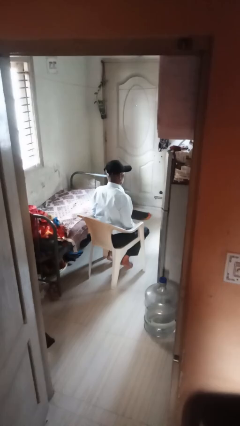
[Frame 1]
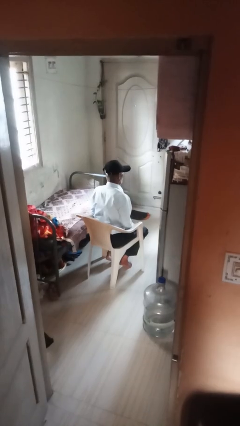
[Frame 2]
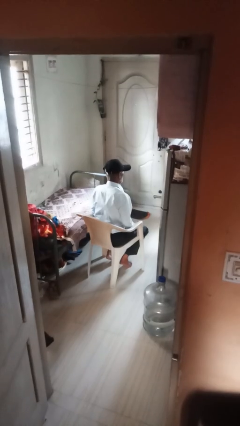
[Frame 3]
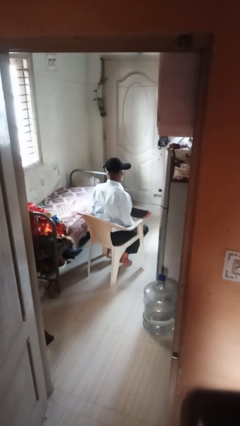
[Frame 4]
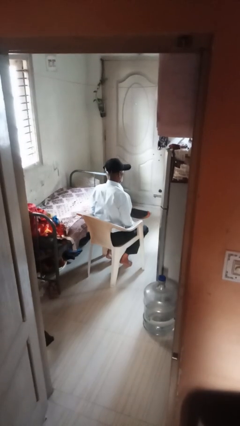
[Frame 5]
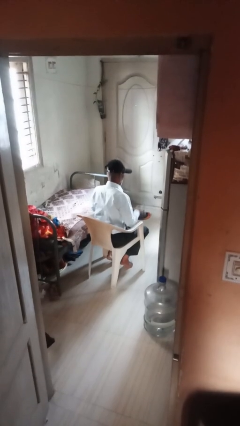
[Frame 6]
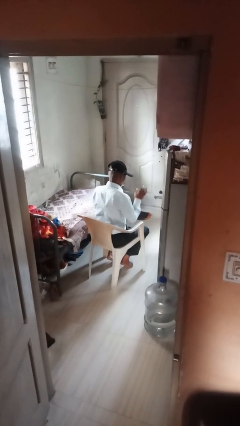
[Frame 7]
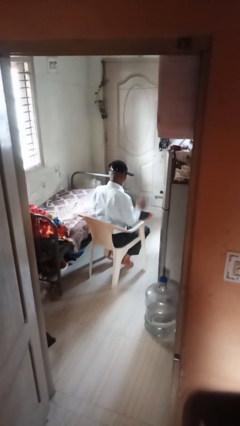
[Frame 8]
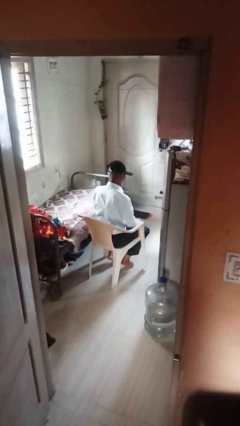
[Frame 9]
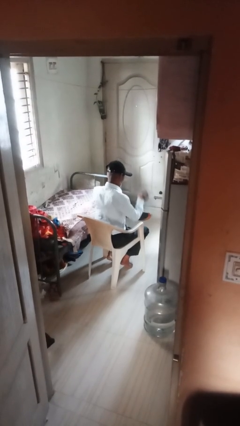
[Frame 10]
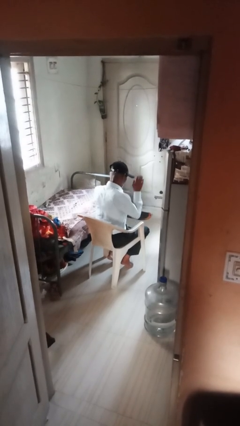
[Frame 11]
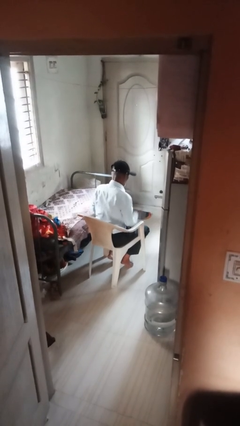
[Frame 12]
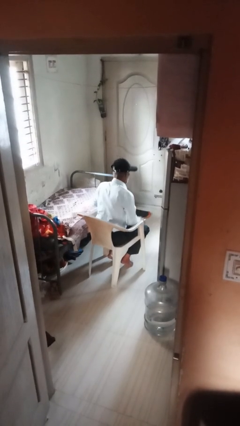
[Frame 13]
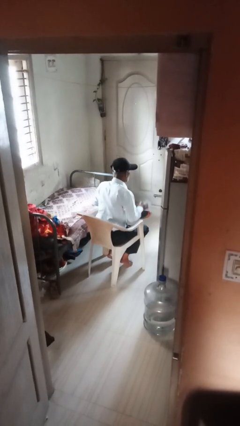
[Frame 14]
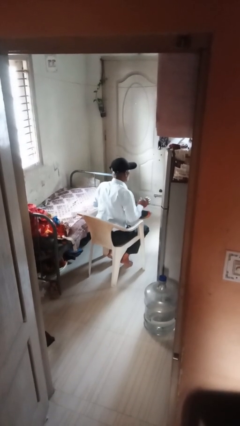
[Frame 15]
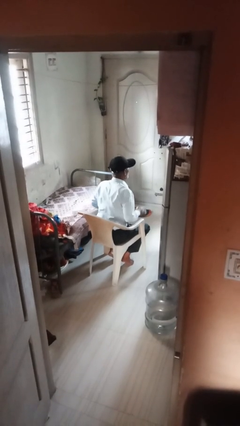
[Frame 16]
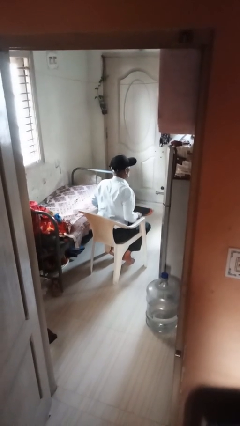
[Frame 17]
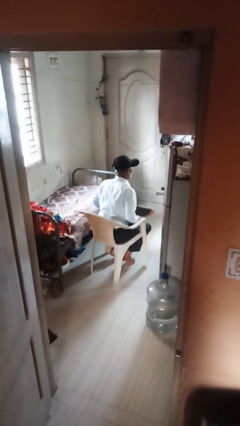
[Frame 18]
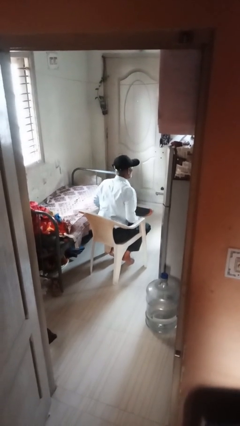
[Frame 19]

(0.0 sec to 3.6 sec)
person slaps hands on thighs

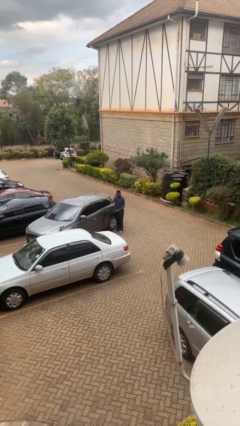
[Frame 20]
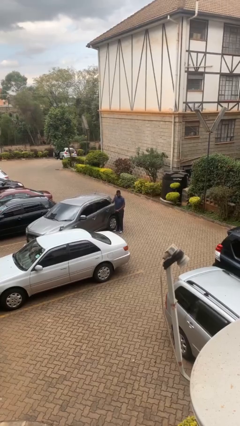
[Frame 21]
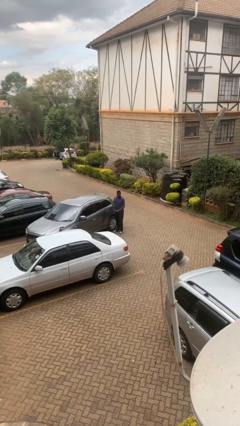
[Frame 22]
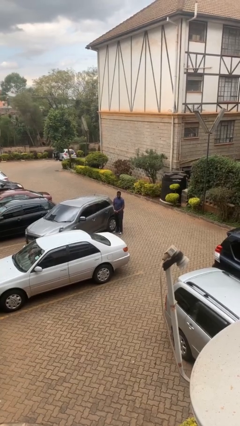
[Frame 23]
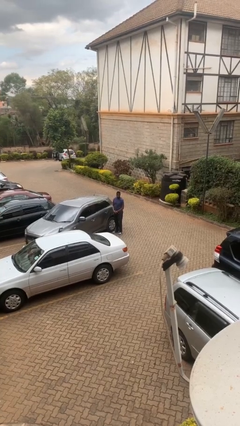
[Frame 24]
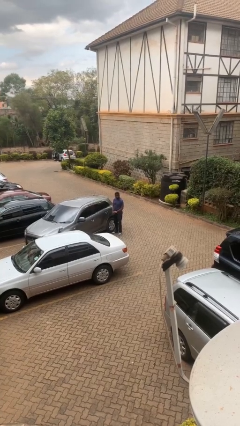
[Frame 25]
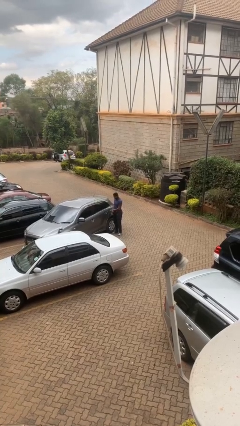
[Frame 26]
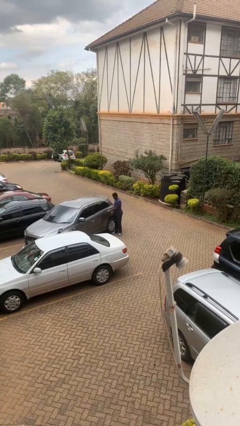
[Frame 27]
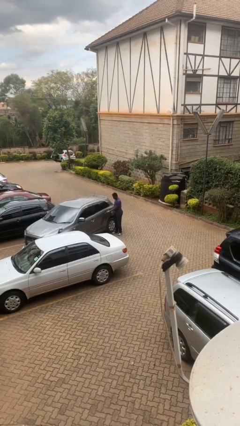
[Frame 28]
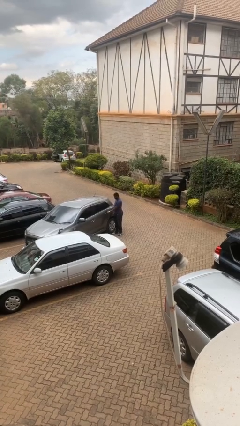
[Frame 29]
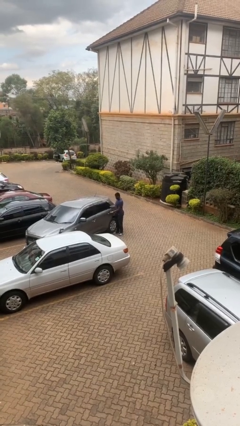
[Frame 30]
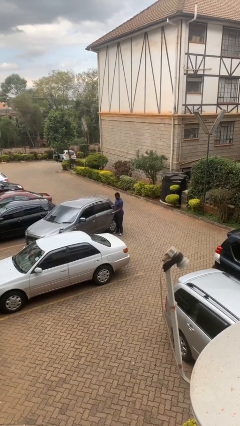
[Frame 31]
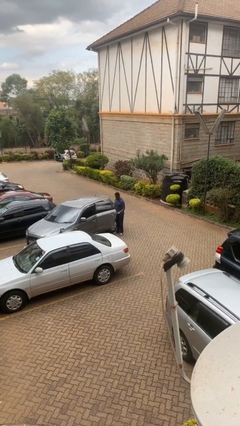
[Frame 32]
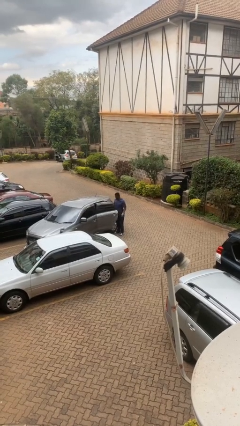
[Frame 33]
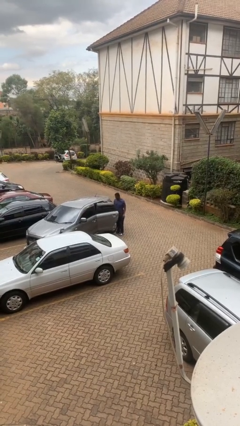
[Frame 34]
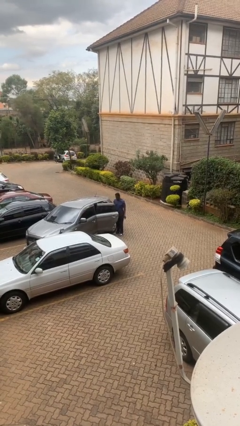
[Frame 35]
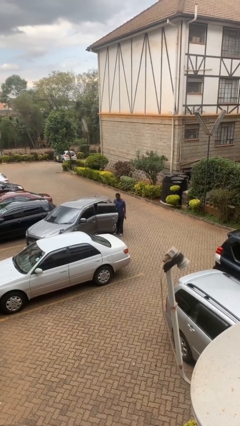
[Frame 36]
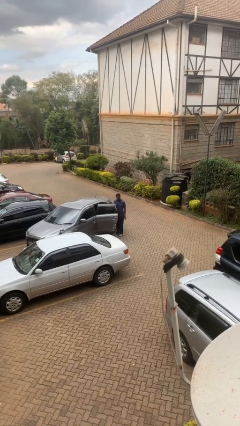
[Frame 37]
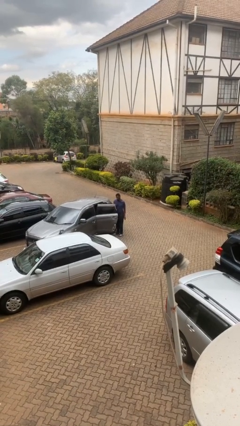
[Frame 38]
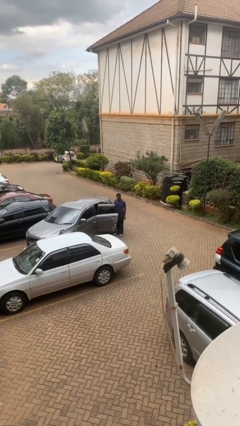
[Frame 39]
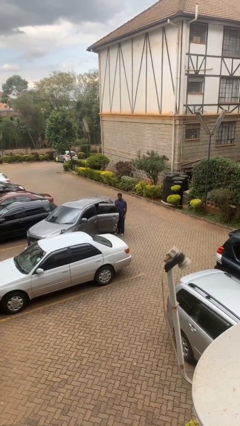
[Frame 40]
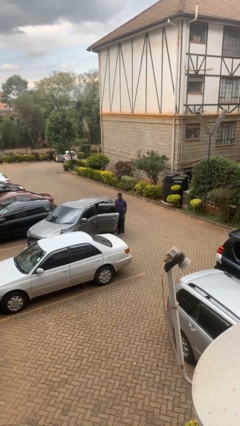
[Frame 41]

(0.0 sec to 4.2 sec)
person opens car door

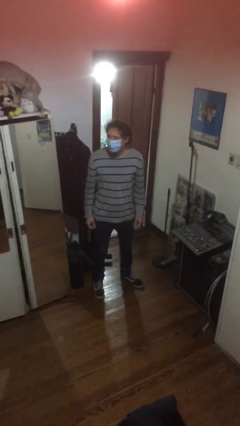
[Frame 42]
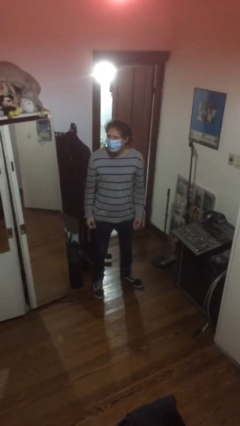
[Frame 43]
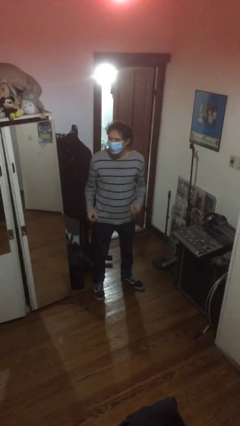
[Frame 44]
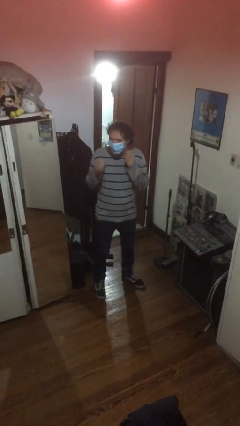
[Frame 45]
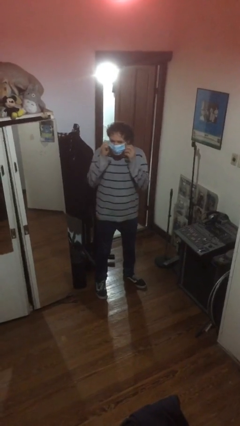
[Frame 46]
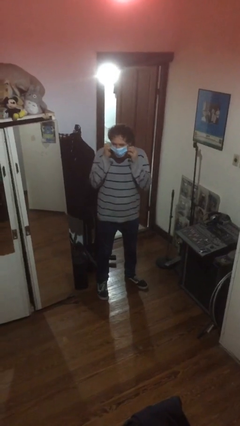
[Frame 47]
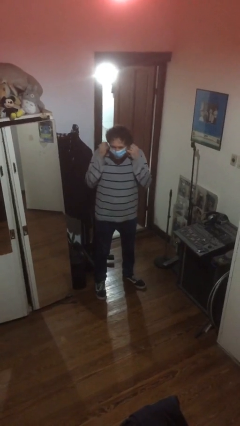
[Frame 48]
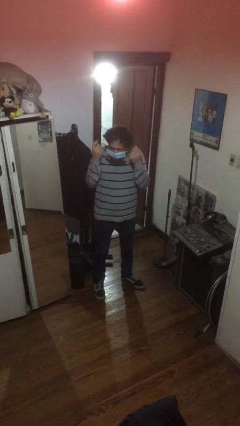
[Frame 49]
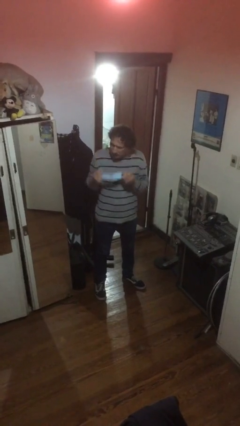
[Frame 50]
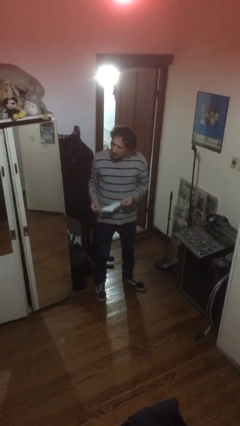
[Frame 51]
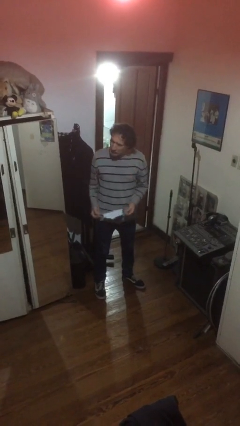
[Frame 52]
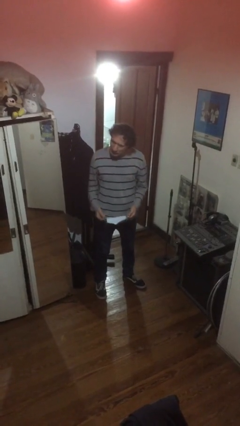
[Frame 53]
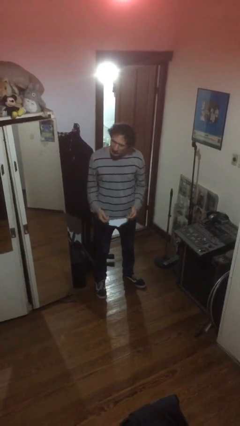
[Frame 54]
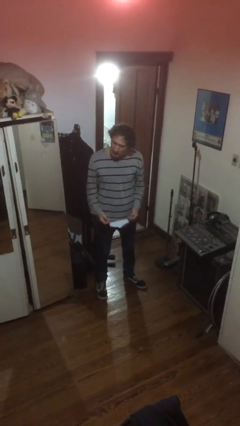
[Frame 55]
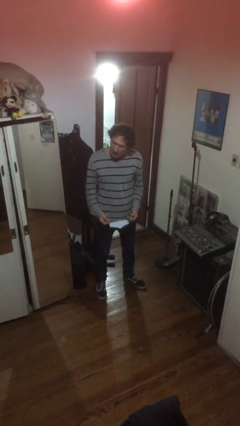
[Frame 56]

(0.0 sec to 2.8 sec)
person takes off facemask

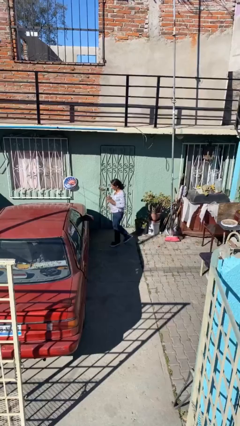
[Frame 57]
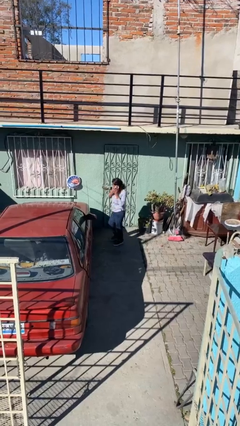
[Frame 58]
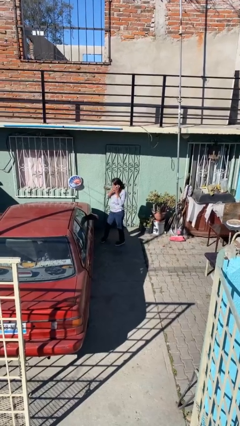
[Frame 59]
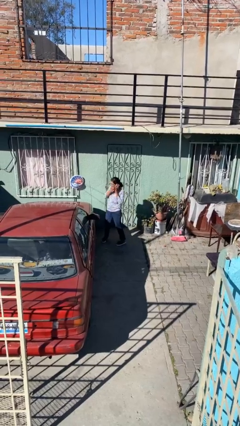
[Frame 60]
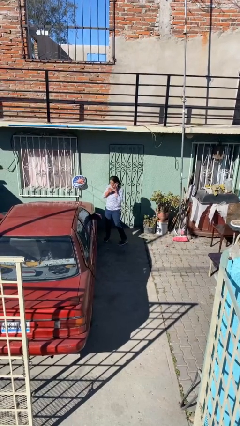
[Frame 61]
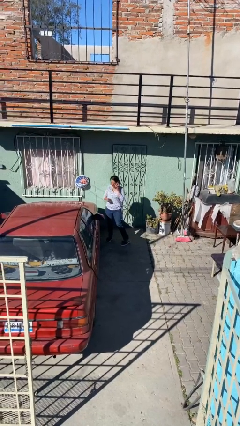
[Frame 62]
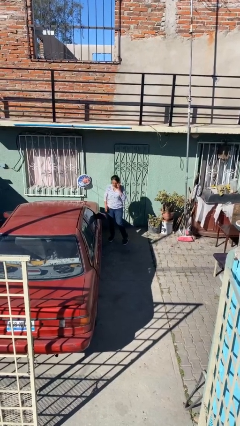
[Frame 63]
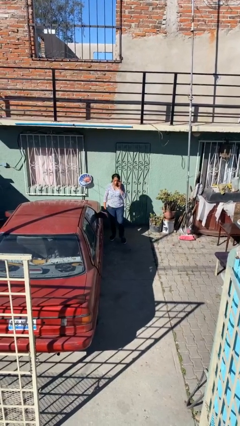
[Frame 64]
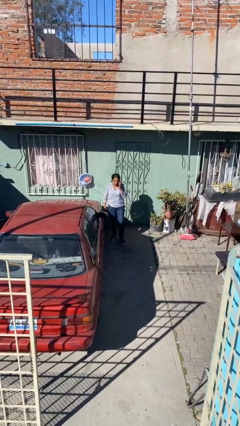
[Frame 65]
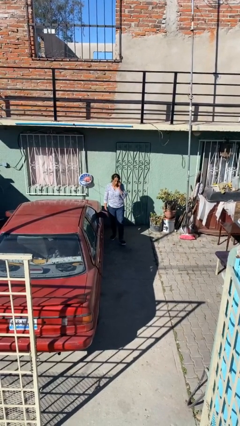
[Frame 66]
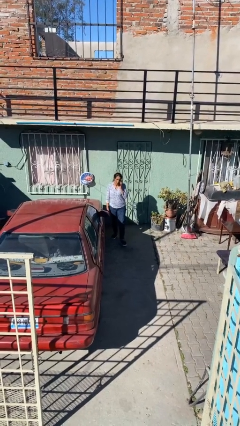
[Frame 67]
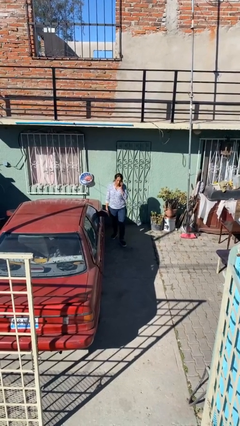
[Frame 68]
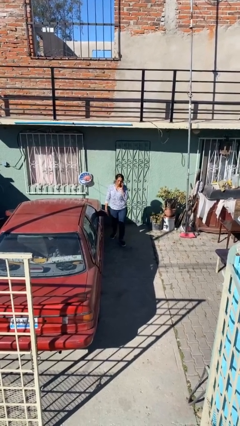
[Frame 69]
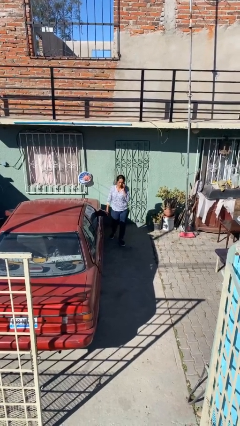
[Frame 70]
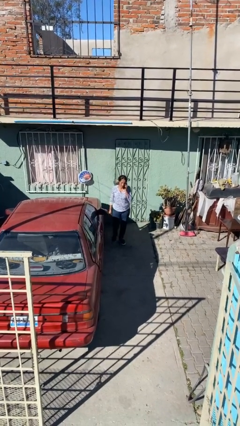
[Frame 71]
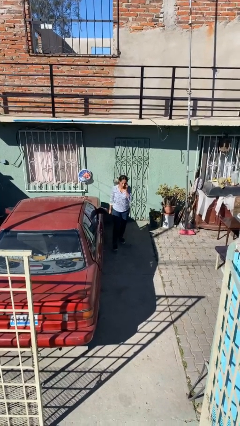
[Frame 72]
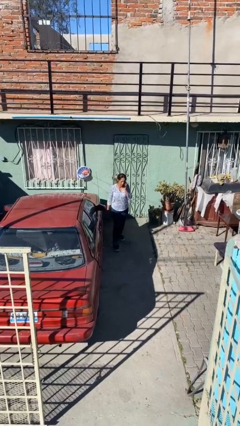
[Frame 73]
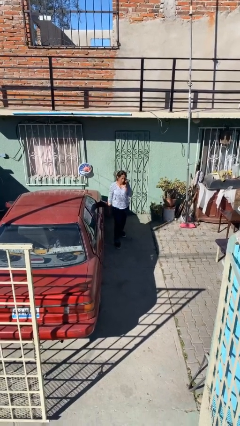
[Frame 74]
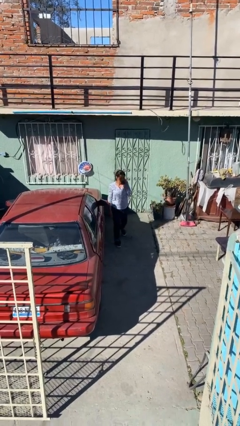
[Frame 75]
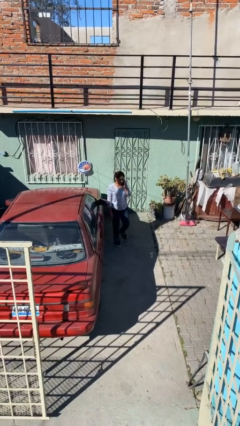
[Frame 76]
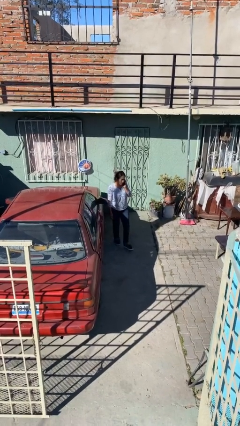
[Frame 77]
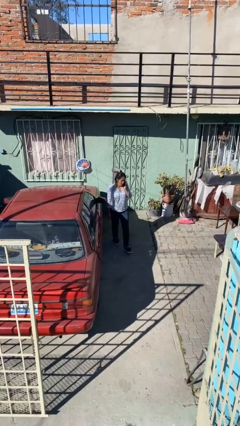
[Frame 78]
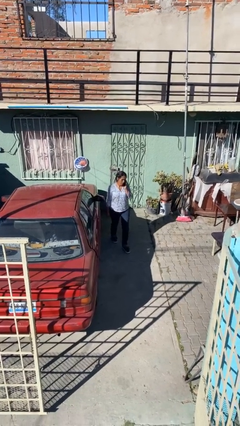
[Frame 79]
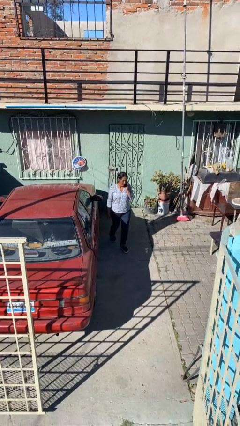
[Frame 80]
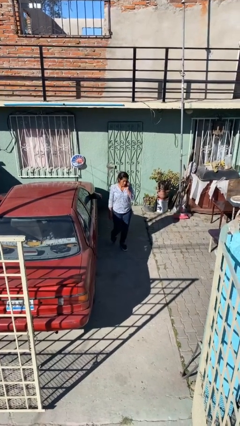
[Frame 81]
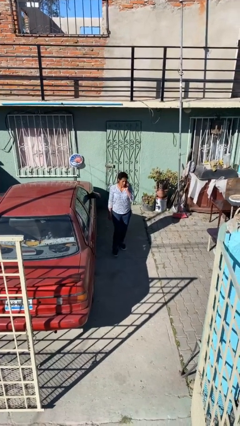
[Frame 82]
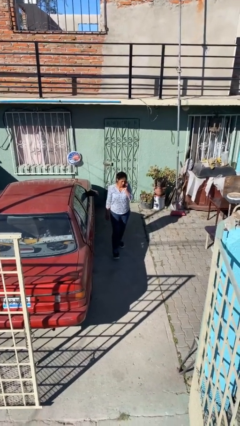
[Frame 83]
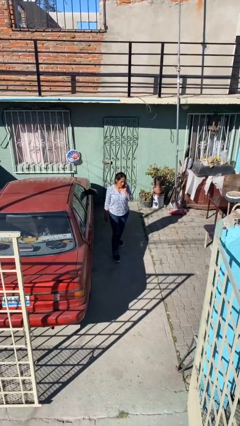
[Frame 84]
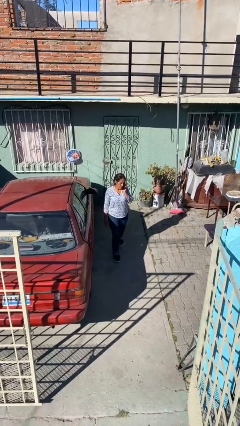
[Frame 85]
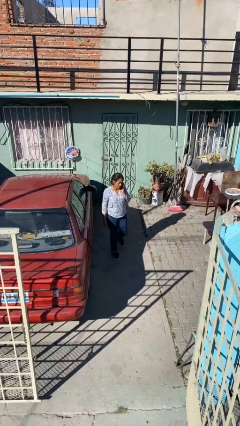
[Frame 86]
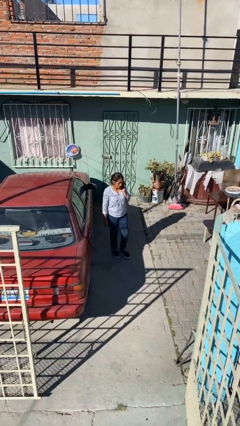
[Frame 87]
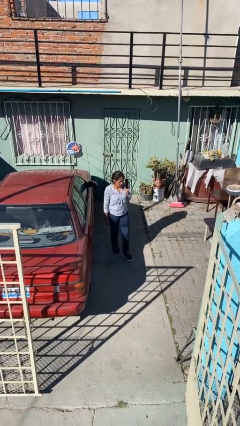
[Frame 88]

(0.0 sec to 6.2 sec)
person talks on phone

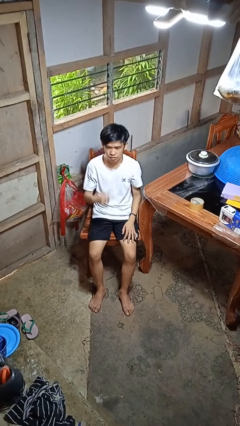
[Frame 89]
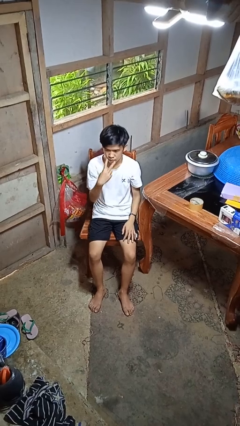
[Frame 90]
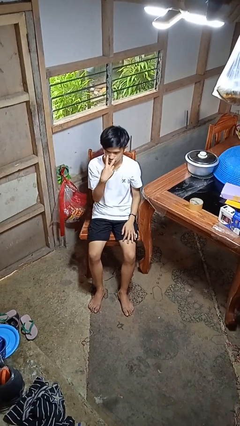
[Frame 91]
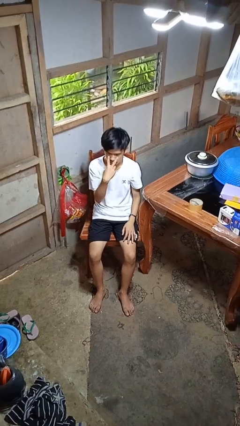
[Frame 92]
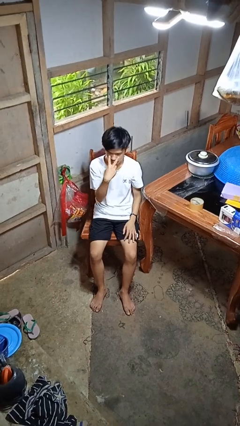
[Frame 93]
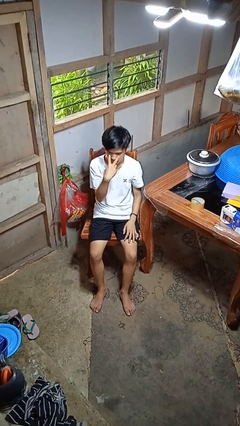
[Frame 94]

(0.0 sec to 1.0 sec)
person gestures watch closely

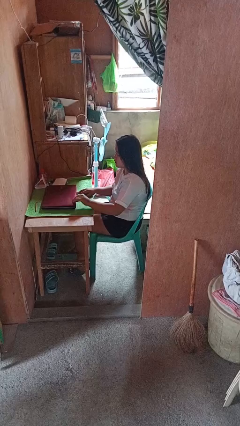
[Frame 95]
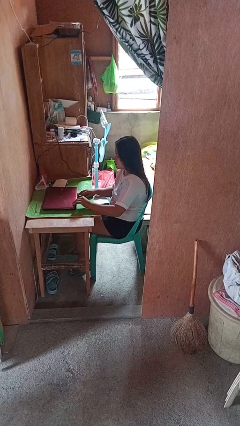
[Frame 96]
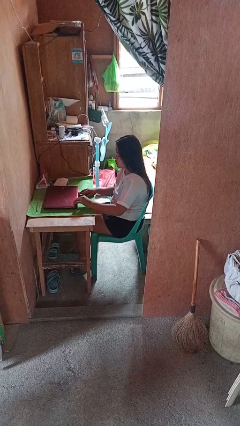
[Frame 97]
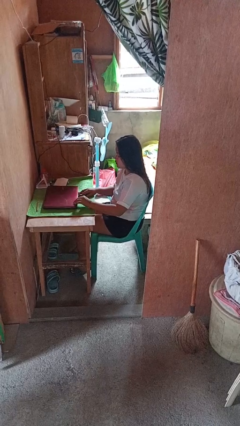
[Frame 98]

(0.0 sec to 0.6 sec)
person closes laptop
